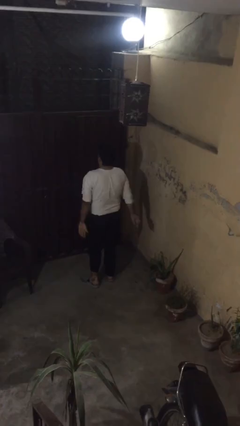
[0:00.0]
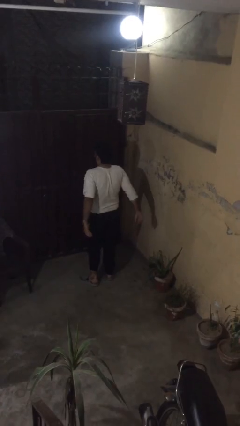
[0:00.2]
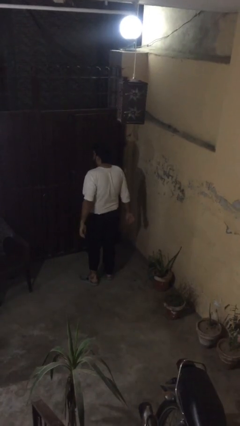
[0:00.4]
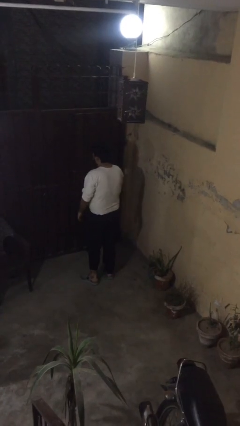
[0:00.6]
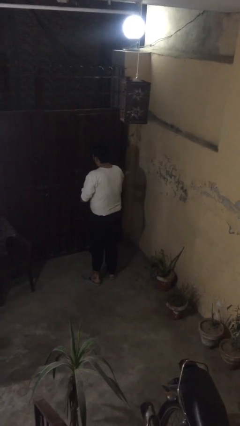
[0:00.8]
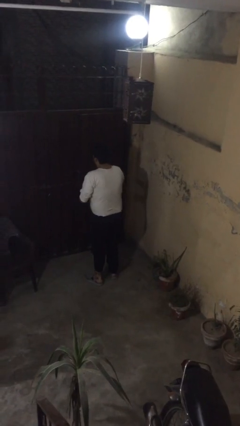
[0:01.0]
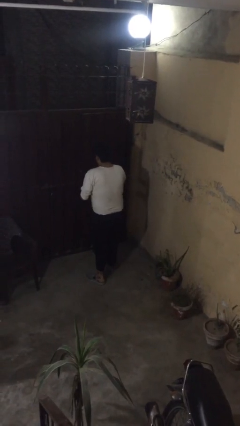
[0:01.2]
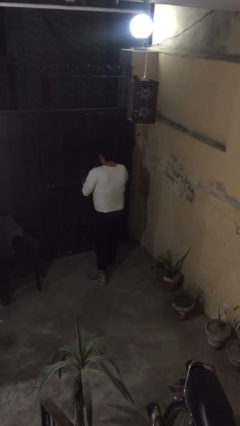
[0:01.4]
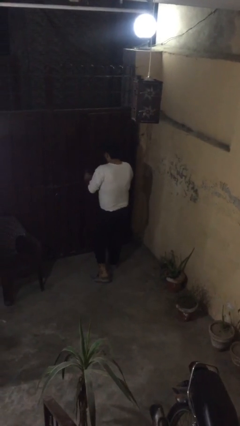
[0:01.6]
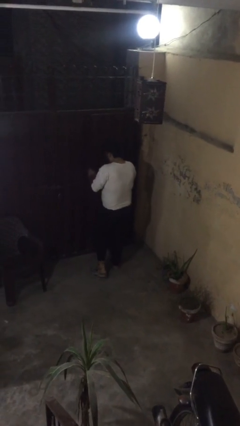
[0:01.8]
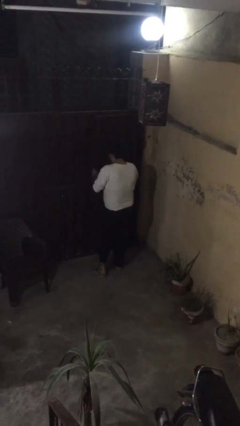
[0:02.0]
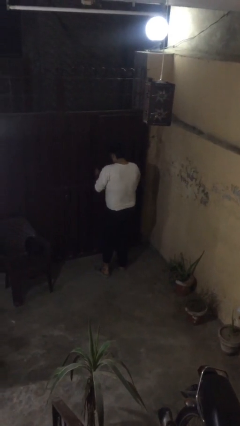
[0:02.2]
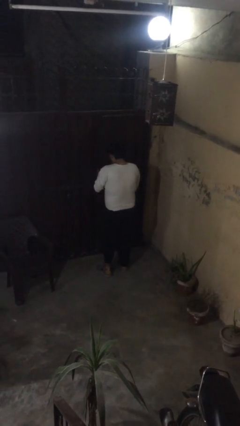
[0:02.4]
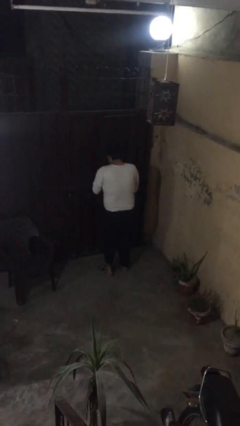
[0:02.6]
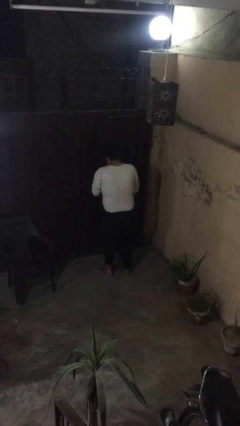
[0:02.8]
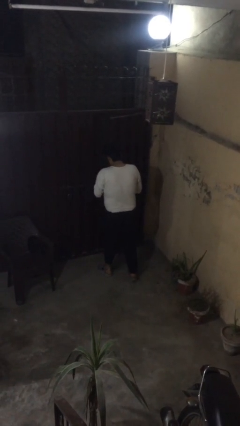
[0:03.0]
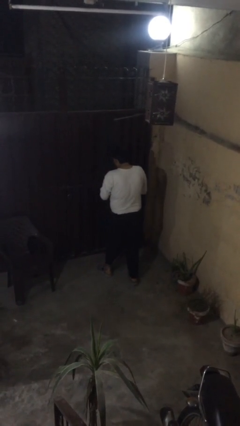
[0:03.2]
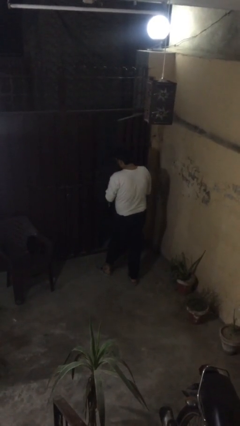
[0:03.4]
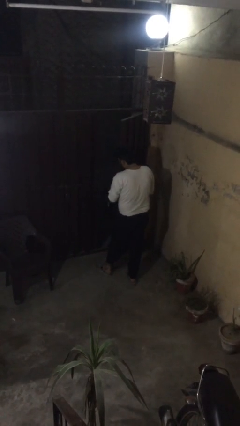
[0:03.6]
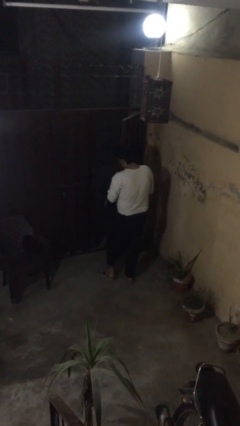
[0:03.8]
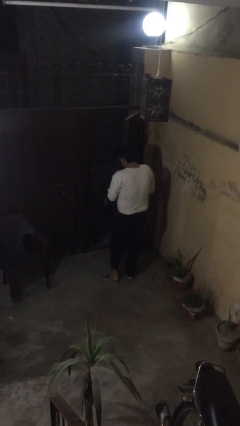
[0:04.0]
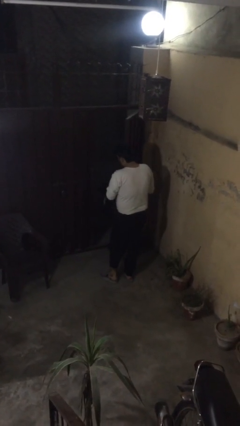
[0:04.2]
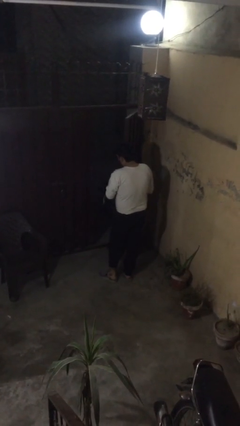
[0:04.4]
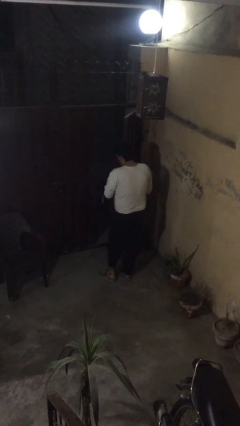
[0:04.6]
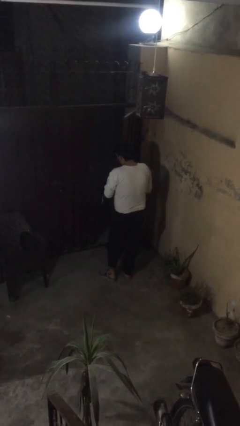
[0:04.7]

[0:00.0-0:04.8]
person opens facility door

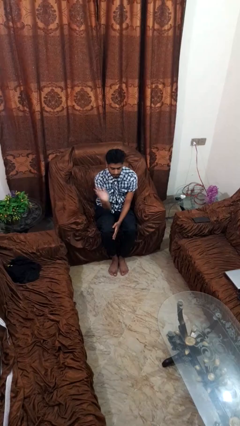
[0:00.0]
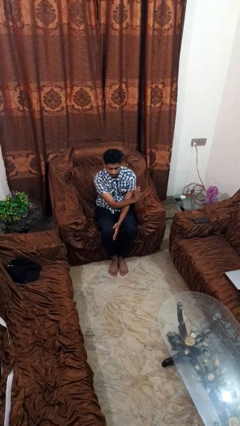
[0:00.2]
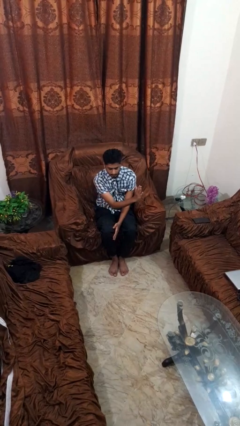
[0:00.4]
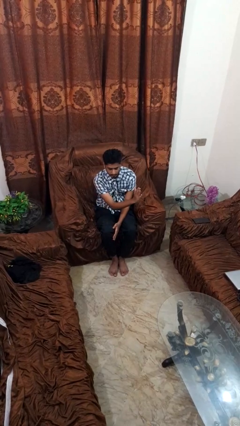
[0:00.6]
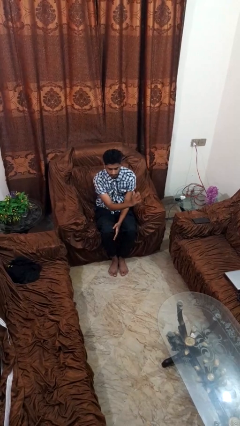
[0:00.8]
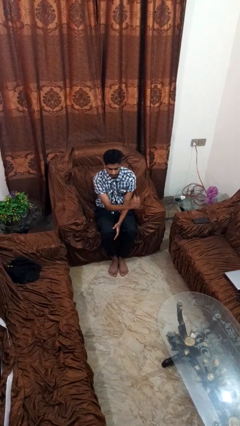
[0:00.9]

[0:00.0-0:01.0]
person gestures swipe left

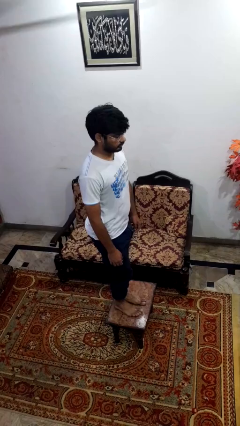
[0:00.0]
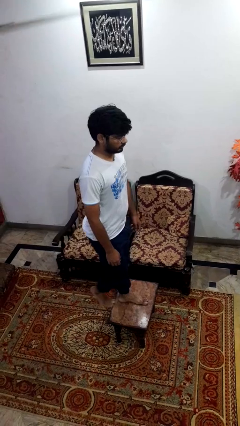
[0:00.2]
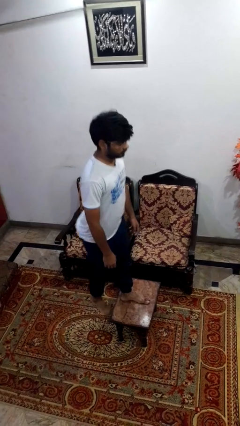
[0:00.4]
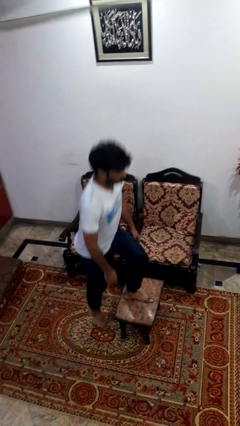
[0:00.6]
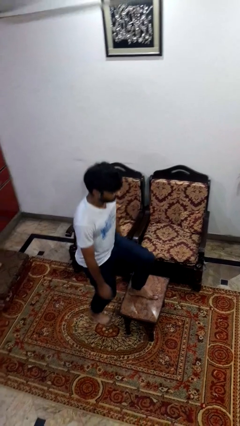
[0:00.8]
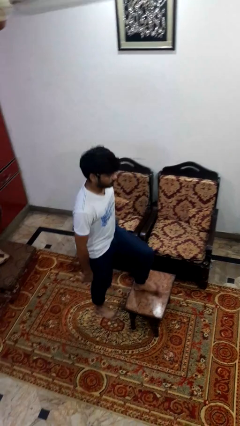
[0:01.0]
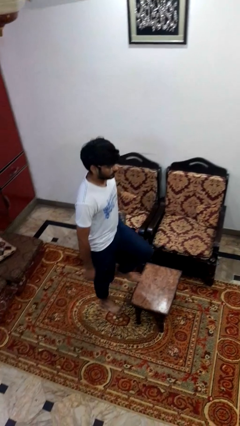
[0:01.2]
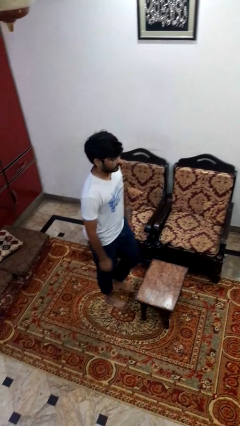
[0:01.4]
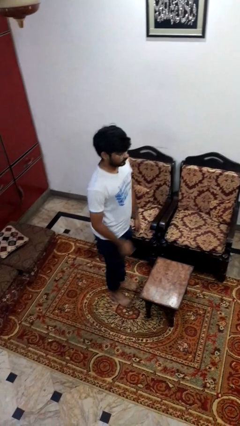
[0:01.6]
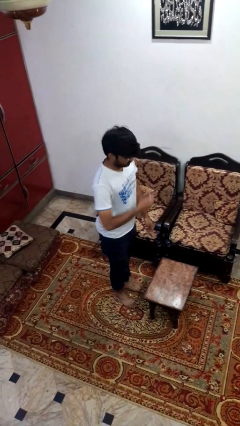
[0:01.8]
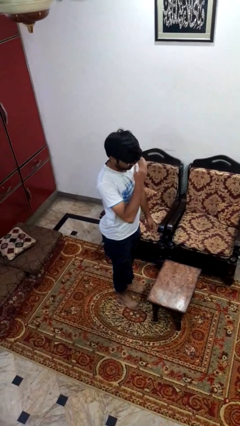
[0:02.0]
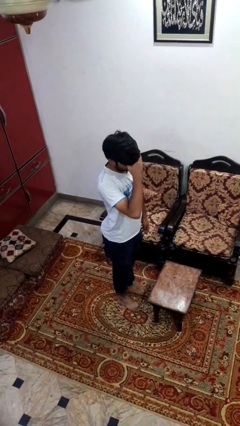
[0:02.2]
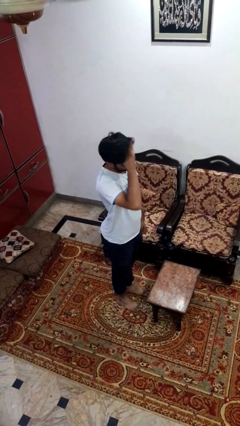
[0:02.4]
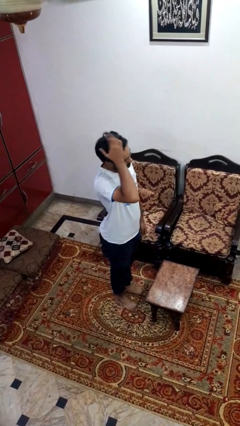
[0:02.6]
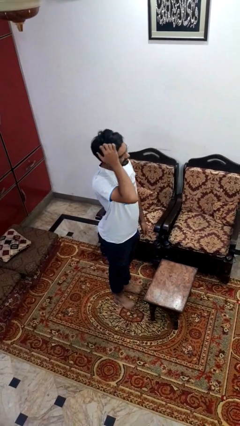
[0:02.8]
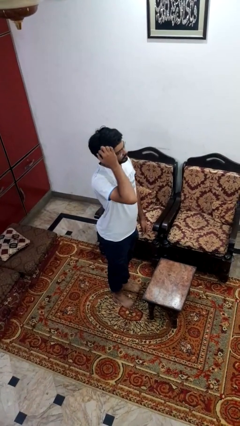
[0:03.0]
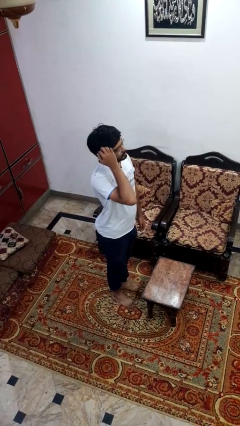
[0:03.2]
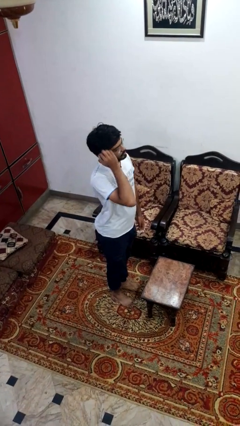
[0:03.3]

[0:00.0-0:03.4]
person climbs off table

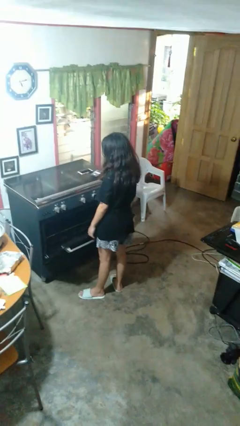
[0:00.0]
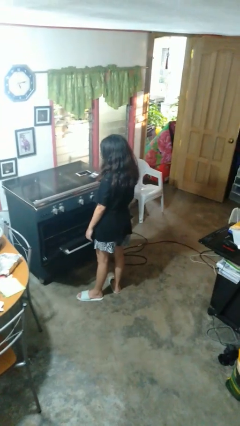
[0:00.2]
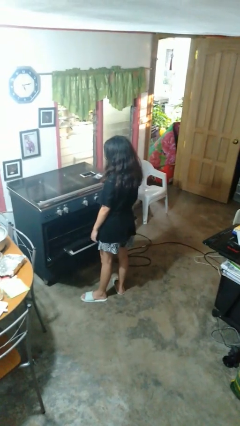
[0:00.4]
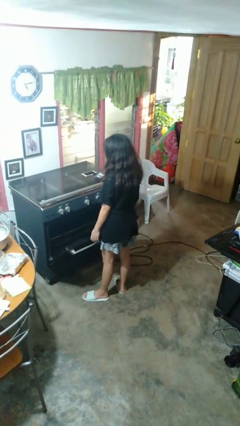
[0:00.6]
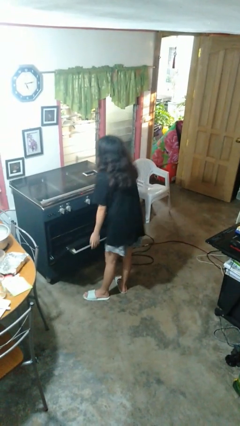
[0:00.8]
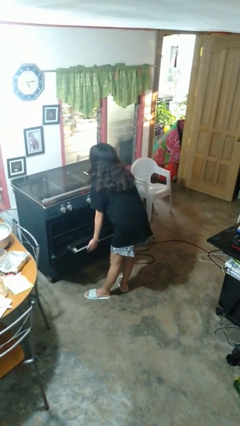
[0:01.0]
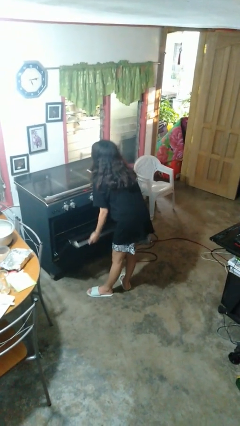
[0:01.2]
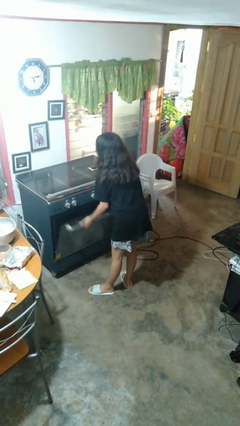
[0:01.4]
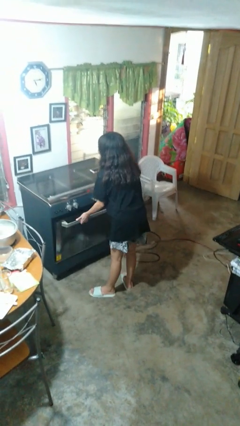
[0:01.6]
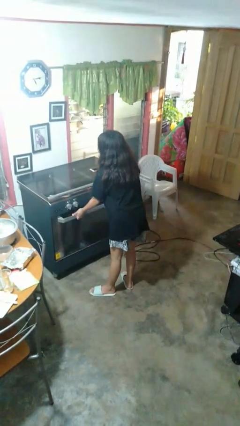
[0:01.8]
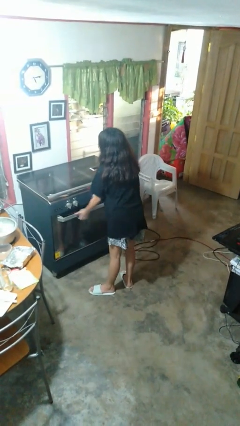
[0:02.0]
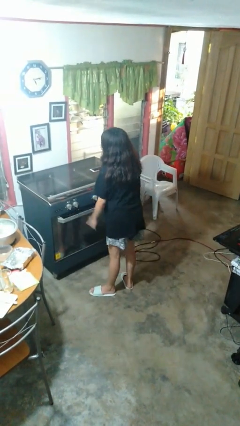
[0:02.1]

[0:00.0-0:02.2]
person closes oven door

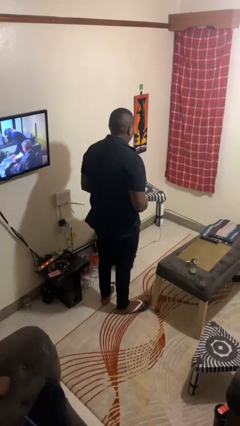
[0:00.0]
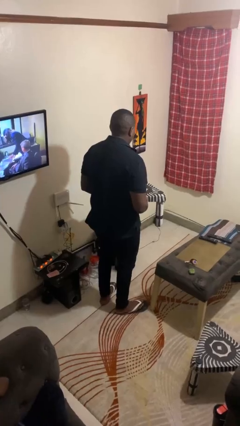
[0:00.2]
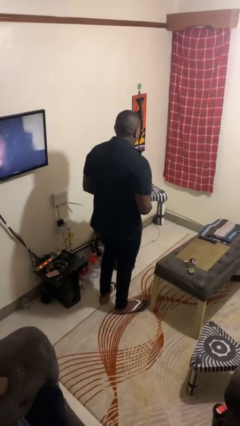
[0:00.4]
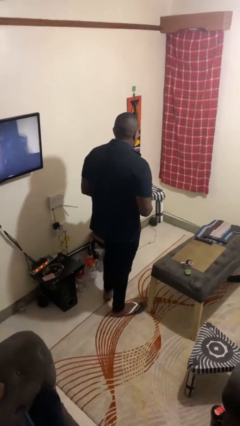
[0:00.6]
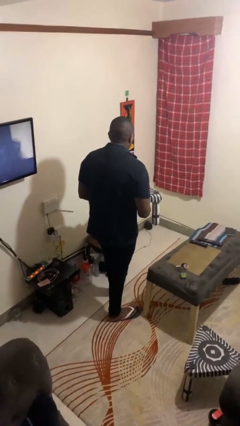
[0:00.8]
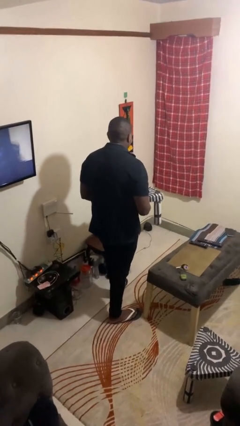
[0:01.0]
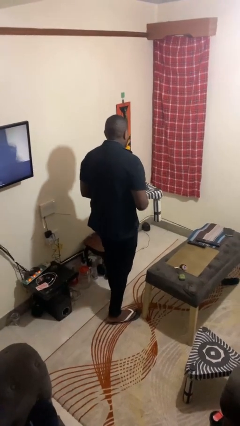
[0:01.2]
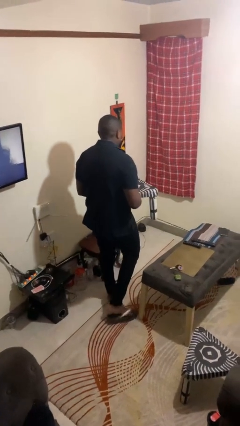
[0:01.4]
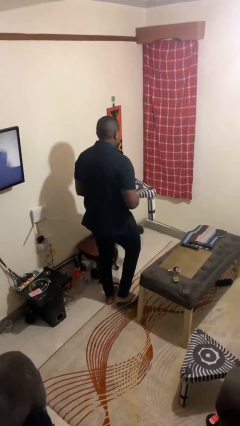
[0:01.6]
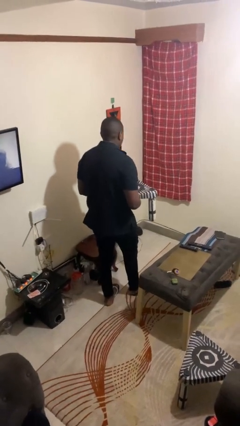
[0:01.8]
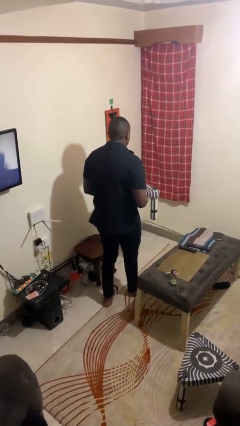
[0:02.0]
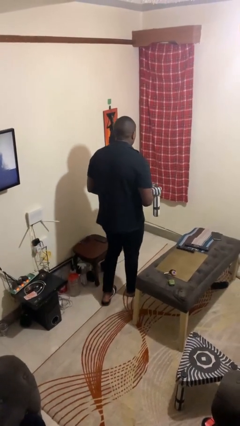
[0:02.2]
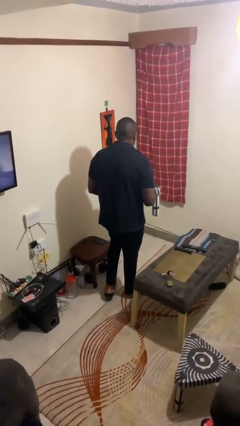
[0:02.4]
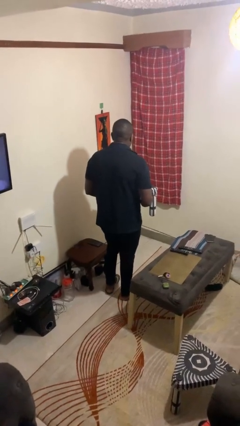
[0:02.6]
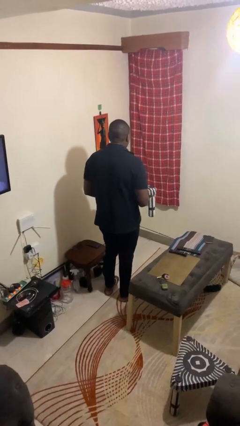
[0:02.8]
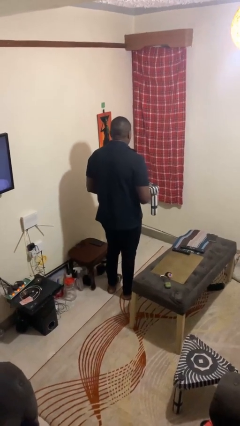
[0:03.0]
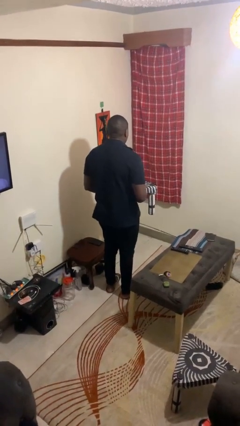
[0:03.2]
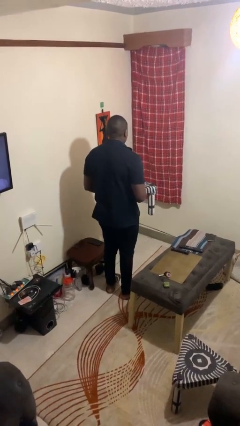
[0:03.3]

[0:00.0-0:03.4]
person carries groceries

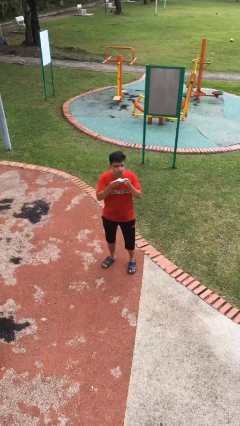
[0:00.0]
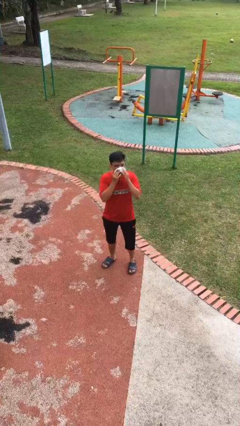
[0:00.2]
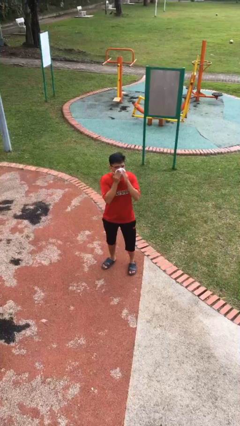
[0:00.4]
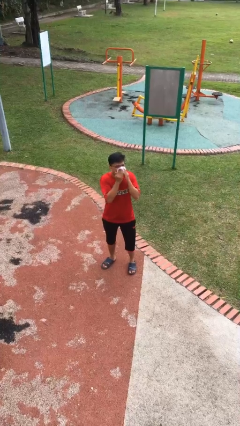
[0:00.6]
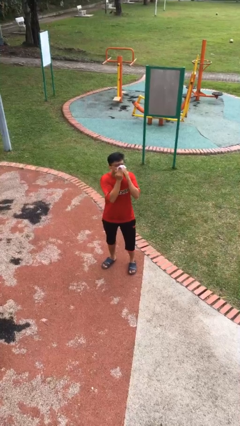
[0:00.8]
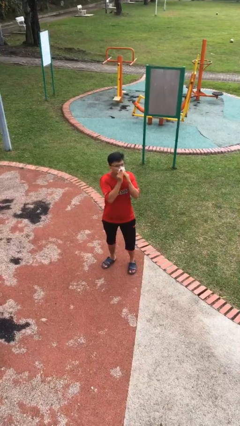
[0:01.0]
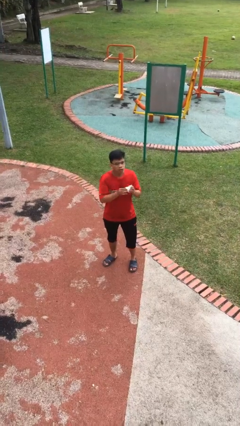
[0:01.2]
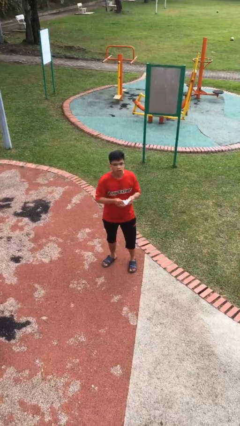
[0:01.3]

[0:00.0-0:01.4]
person blows nose

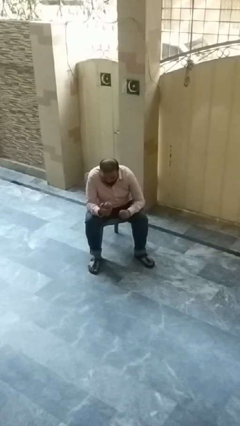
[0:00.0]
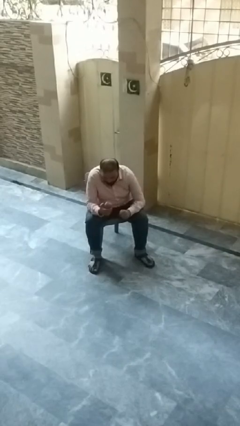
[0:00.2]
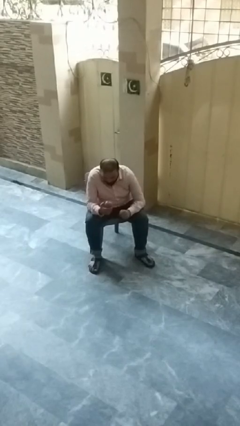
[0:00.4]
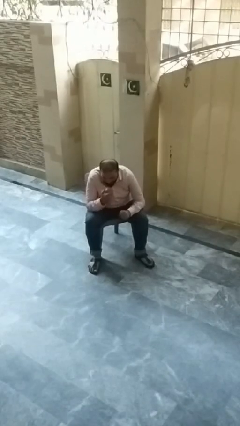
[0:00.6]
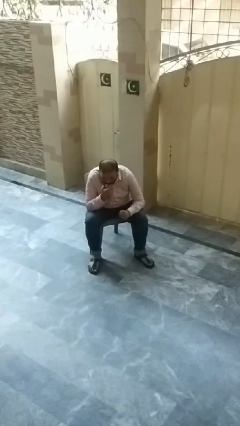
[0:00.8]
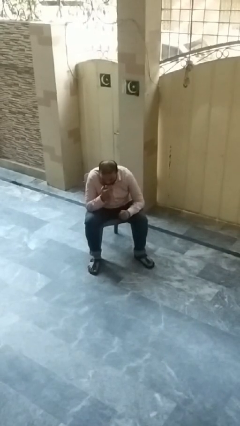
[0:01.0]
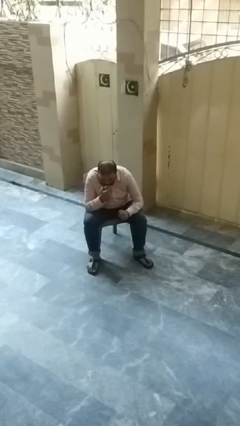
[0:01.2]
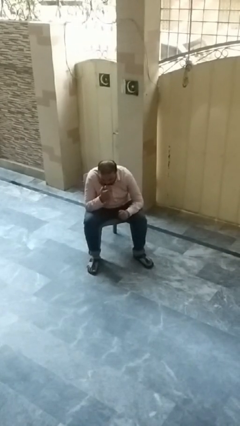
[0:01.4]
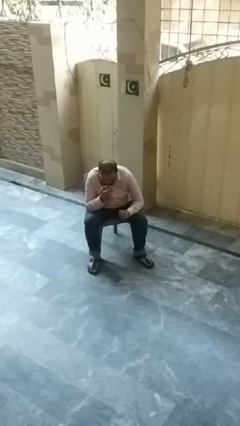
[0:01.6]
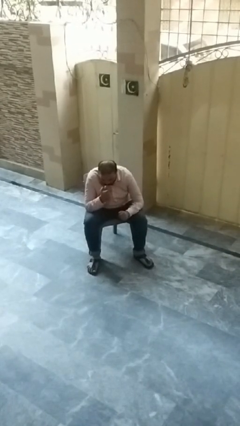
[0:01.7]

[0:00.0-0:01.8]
person eats apple
